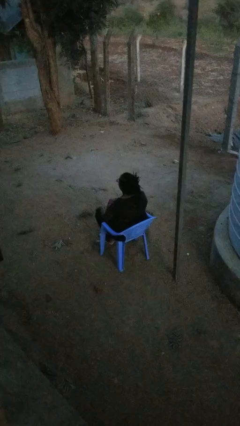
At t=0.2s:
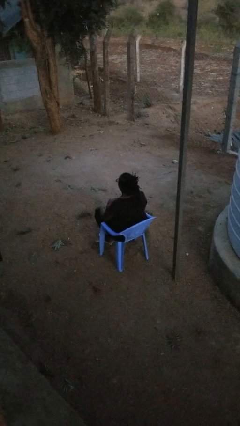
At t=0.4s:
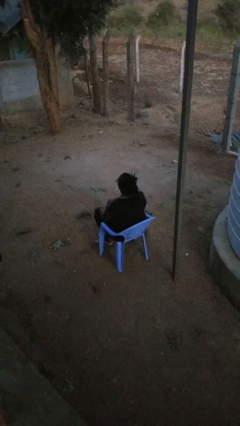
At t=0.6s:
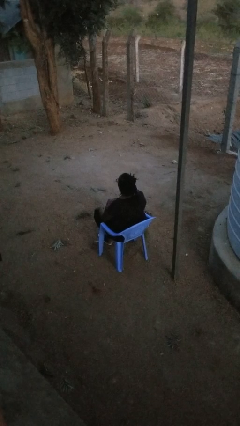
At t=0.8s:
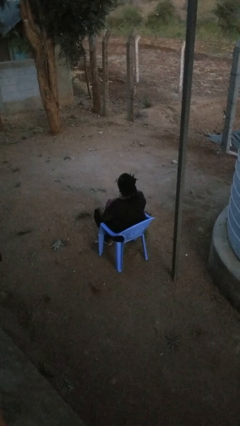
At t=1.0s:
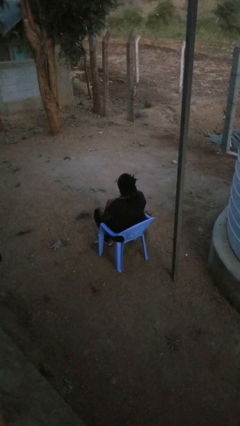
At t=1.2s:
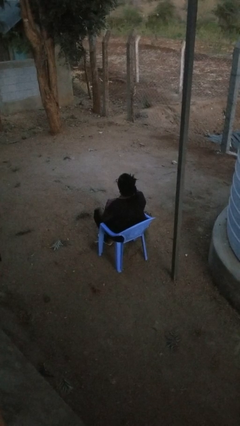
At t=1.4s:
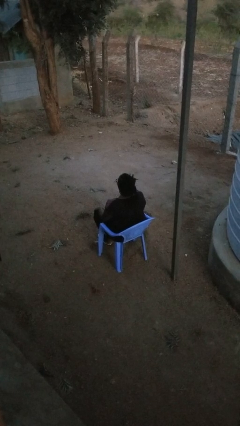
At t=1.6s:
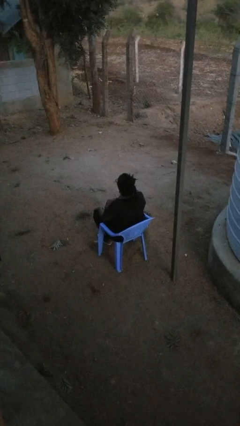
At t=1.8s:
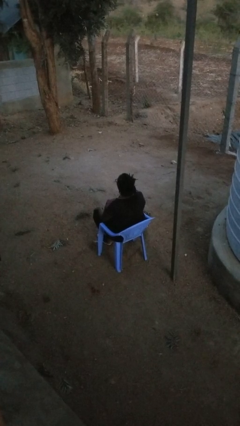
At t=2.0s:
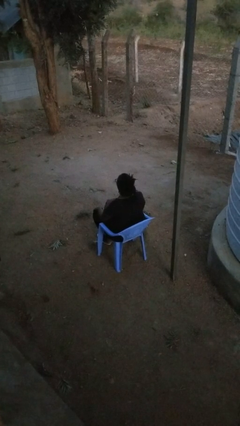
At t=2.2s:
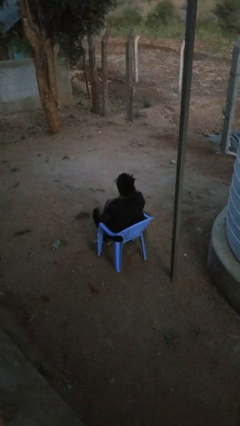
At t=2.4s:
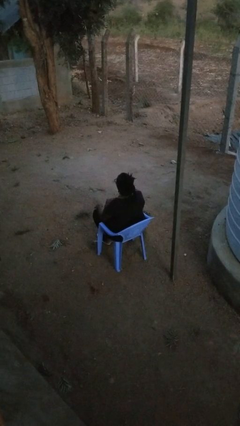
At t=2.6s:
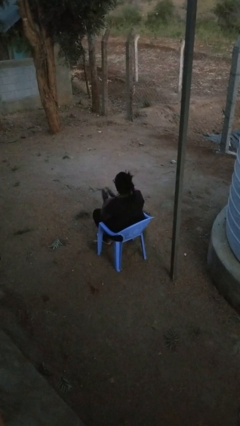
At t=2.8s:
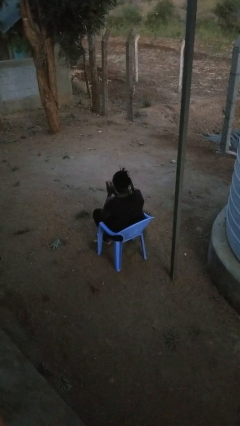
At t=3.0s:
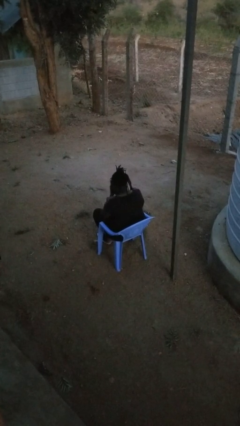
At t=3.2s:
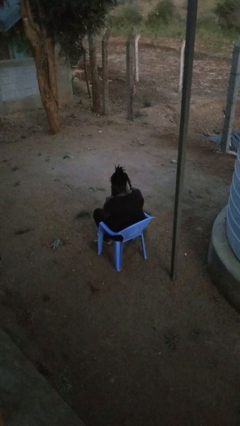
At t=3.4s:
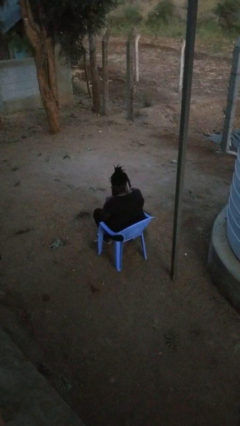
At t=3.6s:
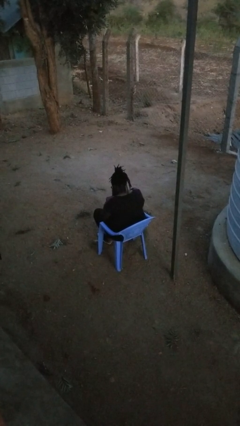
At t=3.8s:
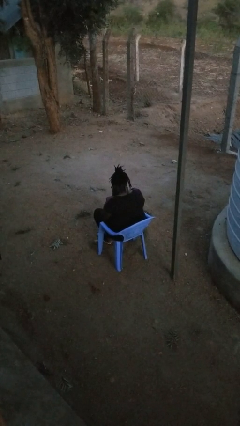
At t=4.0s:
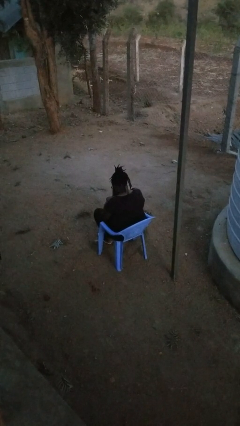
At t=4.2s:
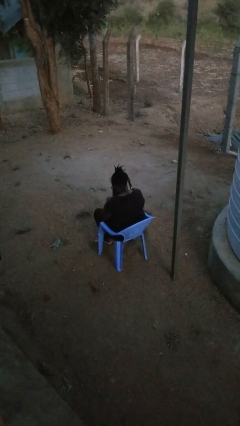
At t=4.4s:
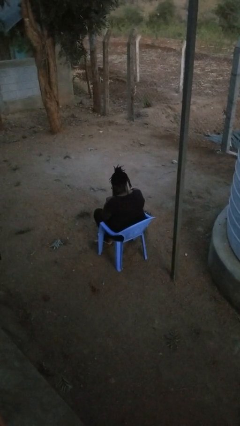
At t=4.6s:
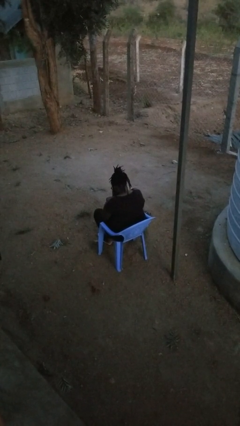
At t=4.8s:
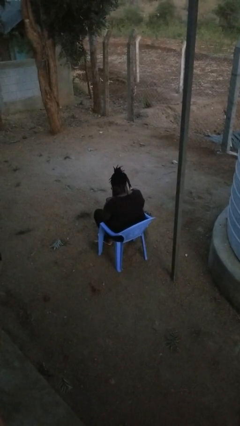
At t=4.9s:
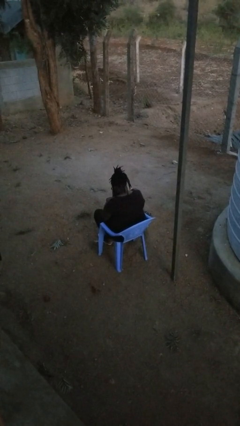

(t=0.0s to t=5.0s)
person prays

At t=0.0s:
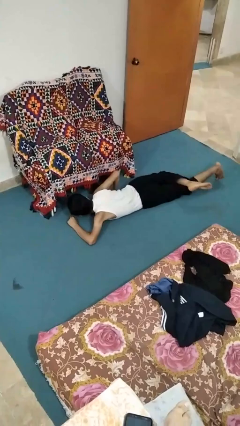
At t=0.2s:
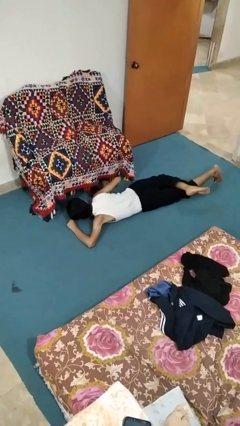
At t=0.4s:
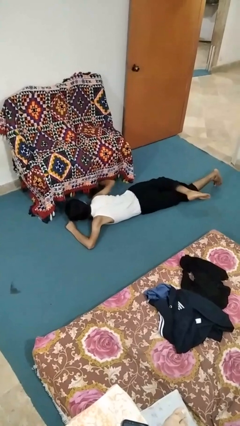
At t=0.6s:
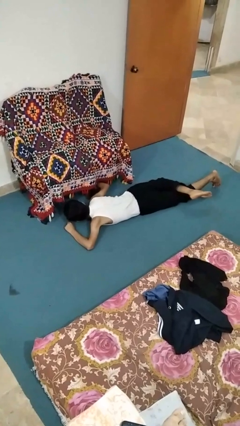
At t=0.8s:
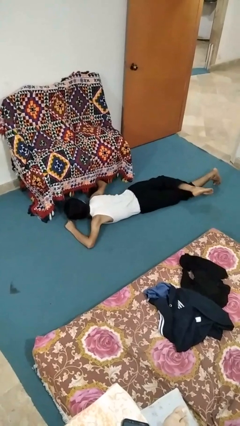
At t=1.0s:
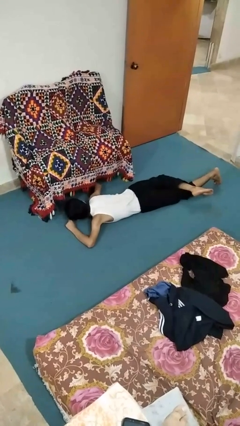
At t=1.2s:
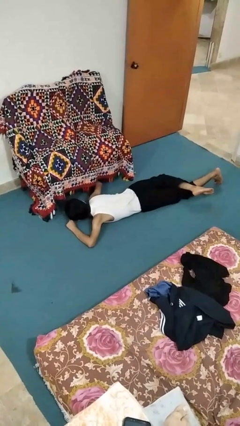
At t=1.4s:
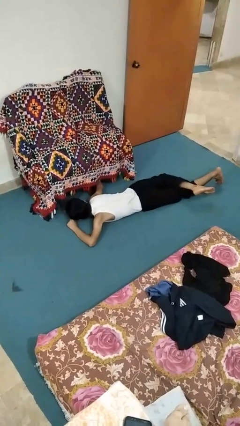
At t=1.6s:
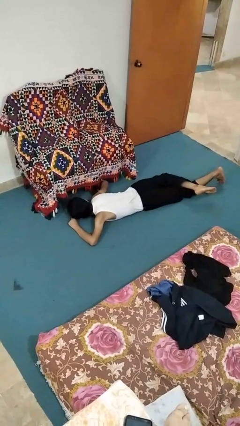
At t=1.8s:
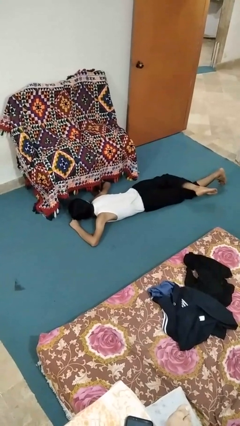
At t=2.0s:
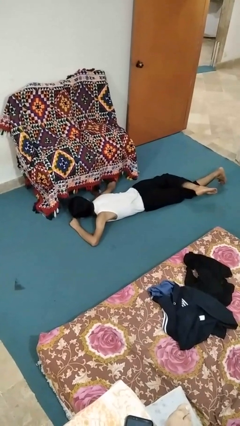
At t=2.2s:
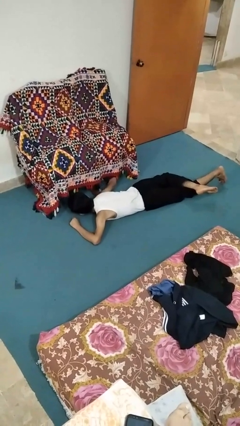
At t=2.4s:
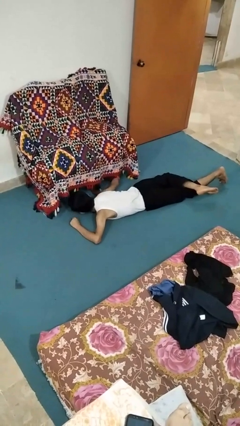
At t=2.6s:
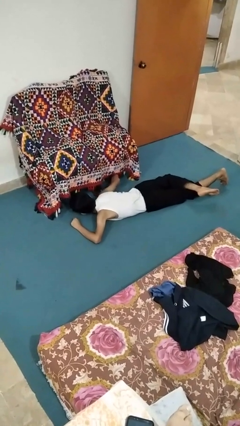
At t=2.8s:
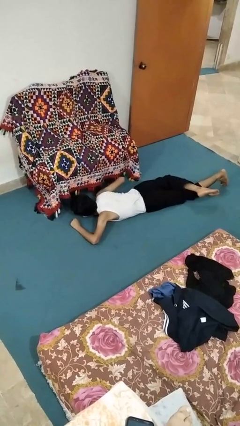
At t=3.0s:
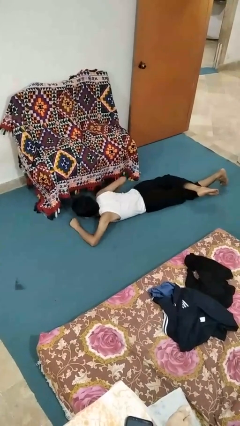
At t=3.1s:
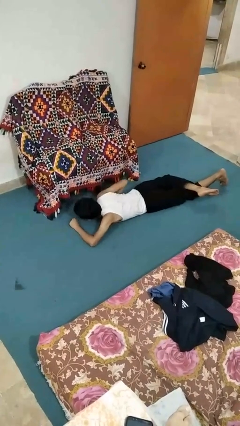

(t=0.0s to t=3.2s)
person searches under couch

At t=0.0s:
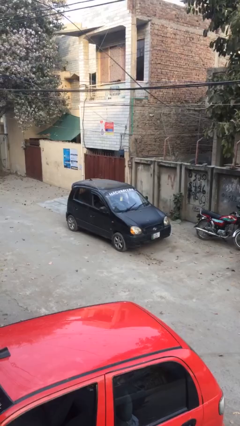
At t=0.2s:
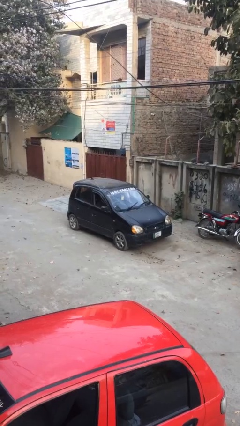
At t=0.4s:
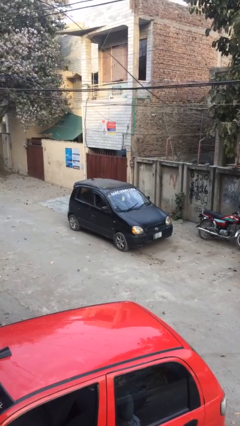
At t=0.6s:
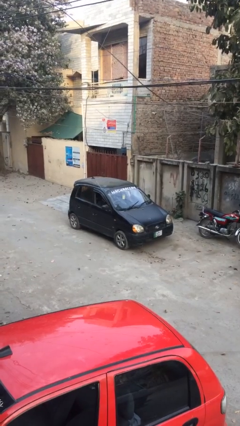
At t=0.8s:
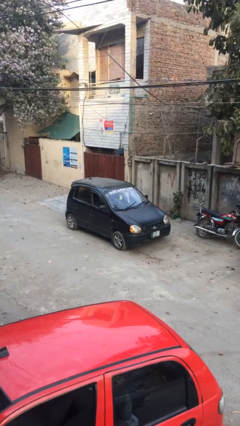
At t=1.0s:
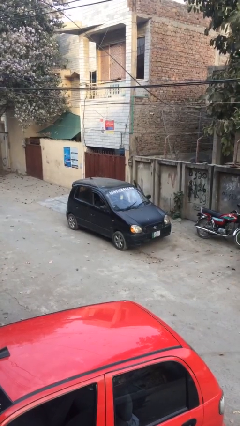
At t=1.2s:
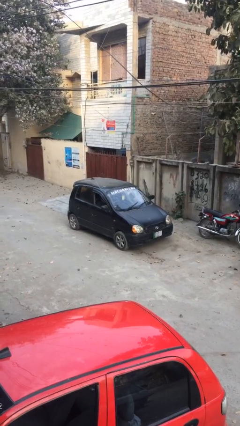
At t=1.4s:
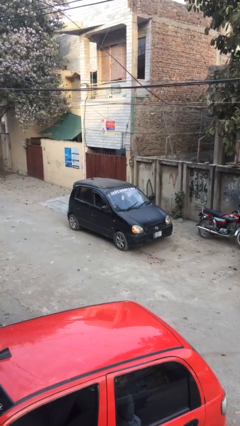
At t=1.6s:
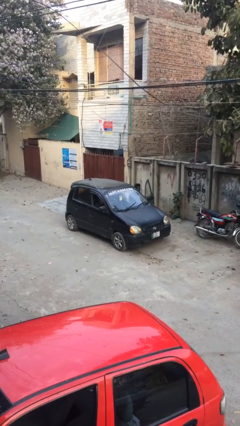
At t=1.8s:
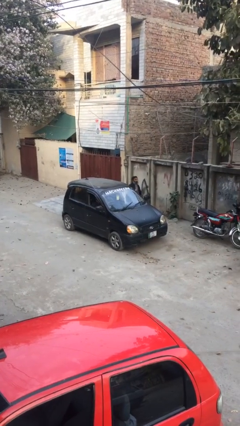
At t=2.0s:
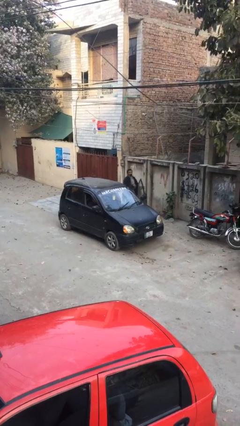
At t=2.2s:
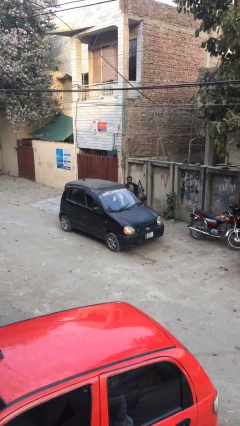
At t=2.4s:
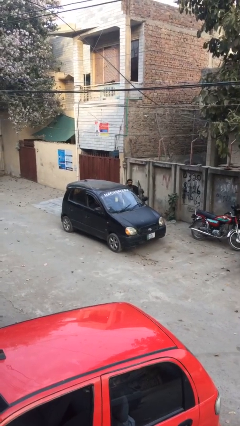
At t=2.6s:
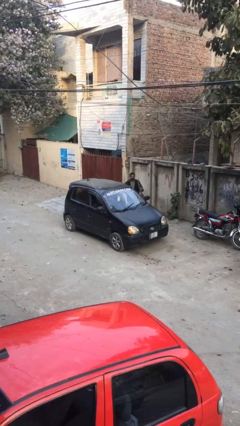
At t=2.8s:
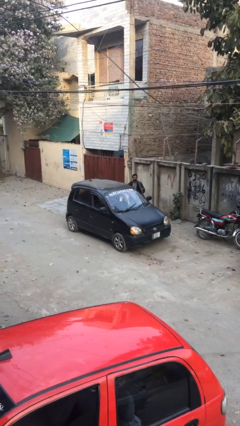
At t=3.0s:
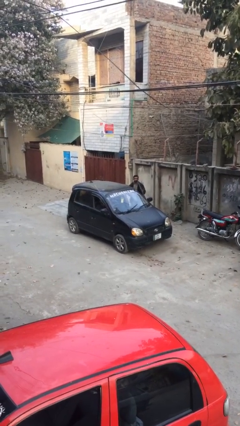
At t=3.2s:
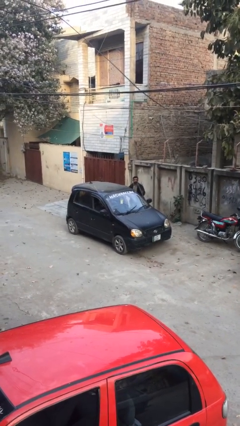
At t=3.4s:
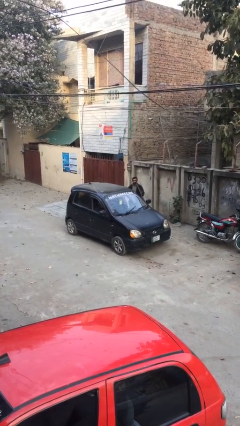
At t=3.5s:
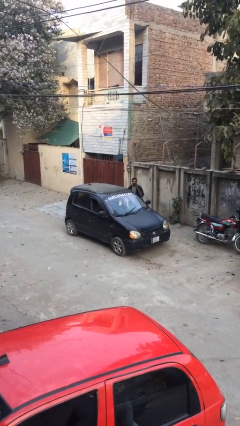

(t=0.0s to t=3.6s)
car drops off person

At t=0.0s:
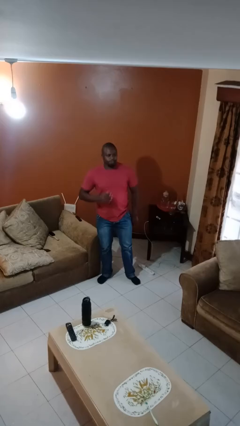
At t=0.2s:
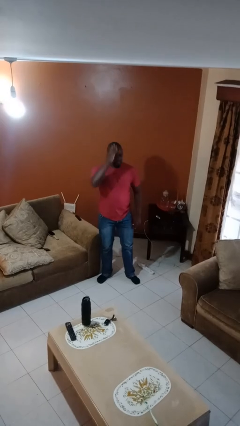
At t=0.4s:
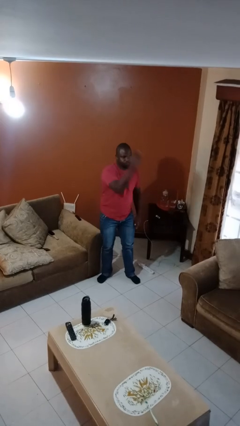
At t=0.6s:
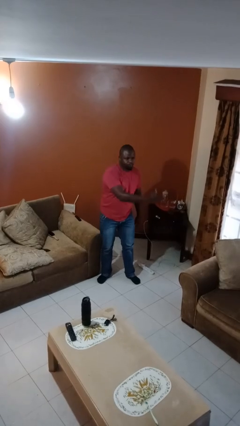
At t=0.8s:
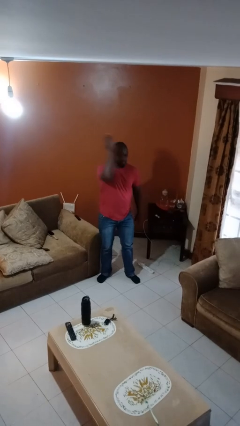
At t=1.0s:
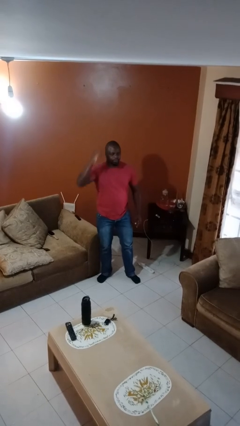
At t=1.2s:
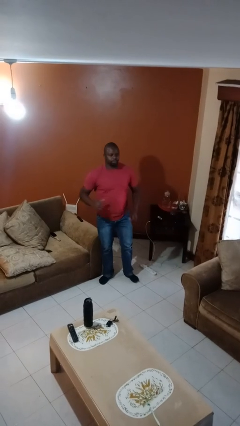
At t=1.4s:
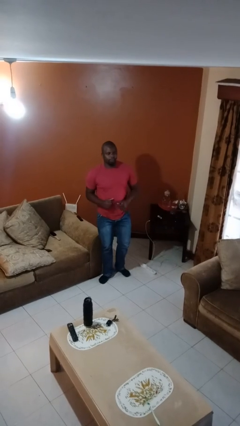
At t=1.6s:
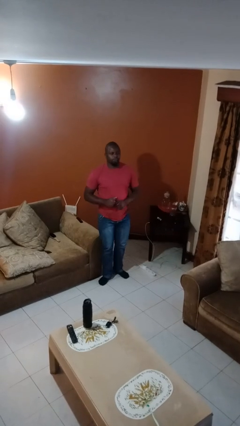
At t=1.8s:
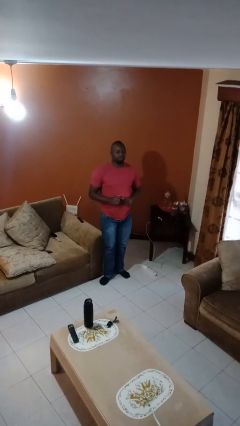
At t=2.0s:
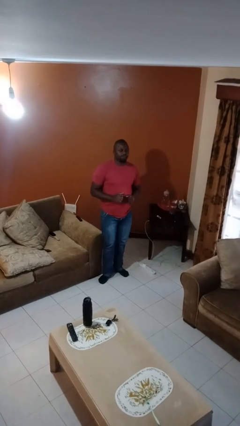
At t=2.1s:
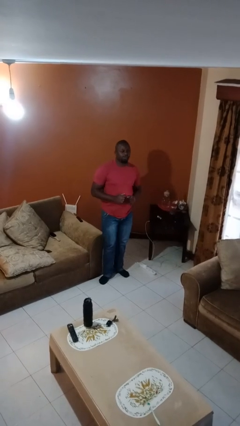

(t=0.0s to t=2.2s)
person karate chop

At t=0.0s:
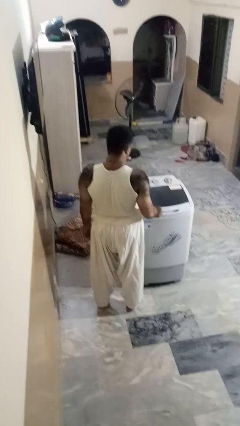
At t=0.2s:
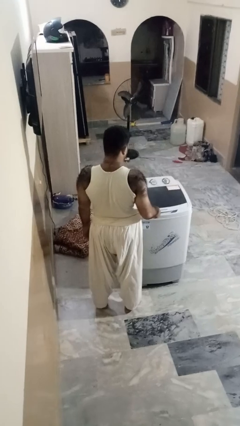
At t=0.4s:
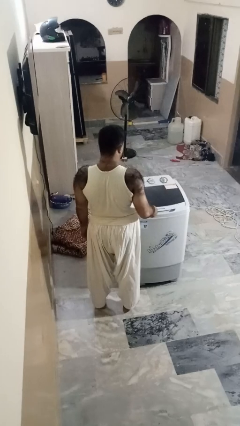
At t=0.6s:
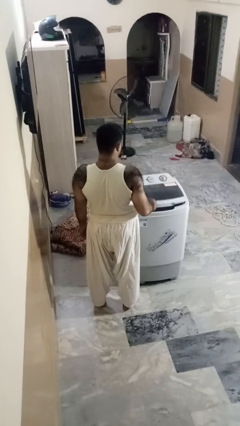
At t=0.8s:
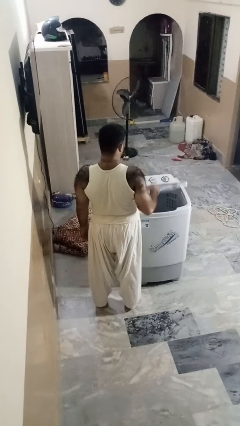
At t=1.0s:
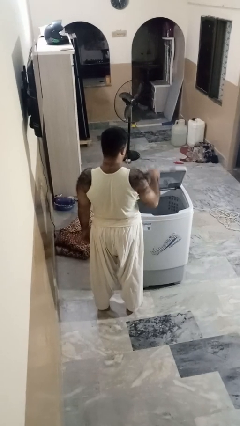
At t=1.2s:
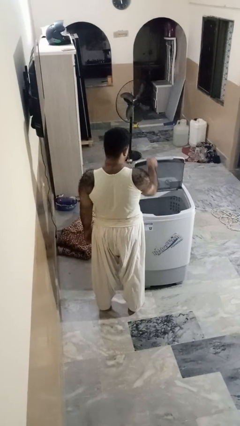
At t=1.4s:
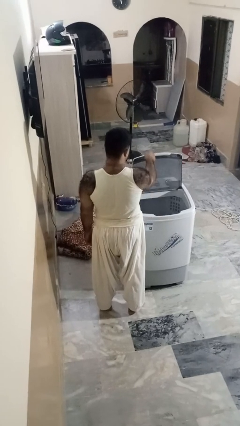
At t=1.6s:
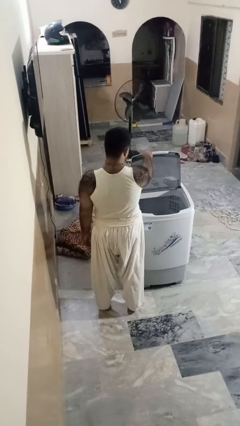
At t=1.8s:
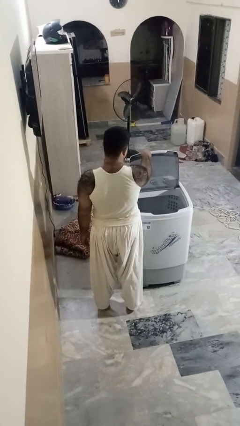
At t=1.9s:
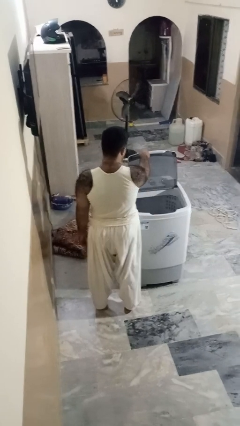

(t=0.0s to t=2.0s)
person opens clothes washer

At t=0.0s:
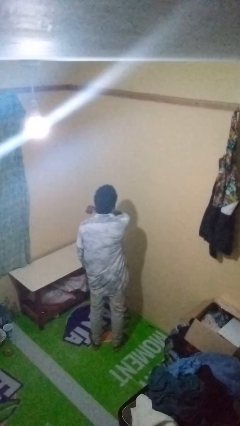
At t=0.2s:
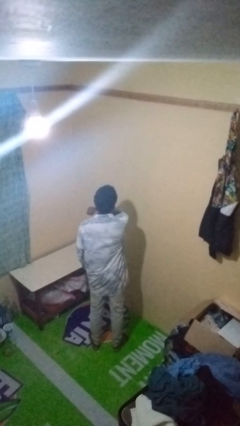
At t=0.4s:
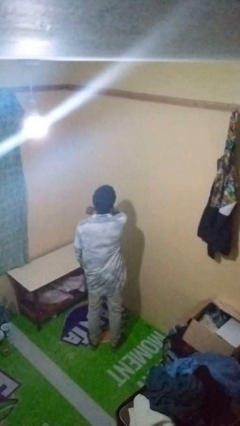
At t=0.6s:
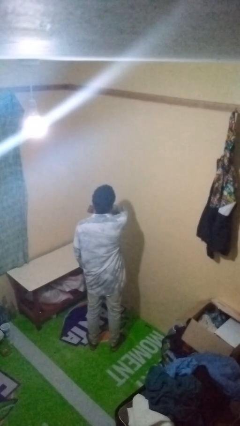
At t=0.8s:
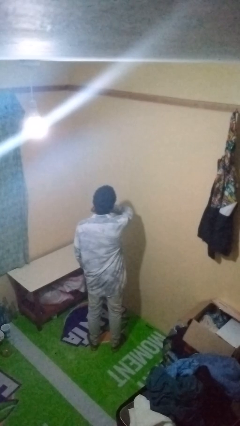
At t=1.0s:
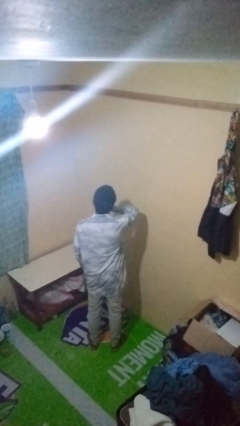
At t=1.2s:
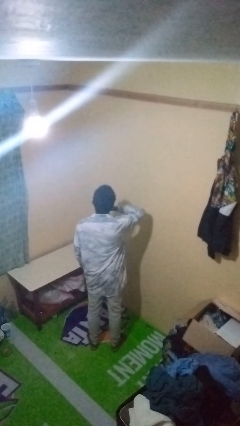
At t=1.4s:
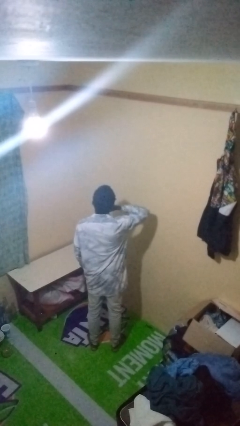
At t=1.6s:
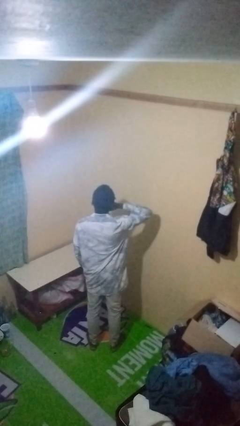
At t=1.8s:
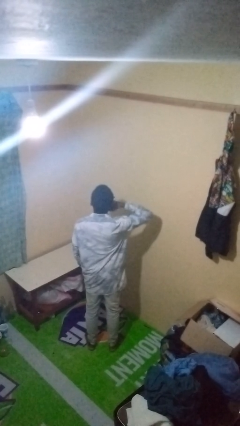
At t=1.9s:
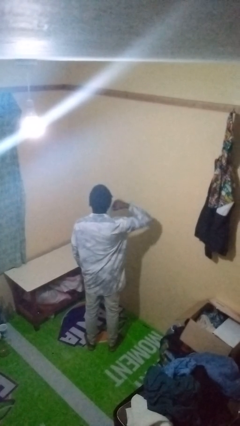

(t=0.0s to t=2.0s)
person gestures cut
